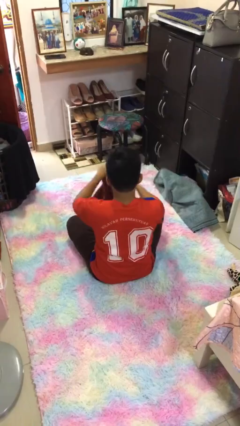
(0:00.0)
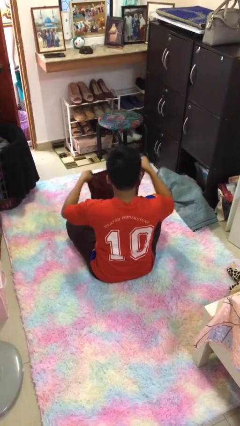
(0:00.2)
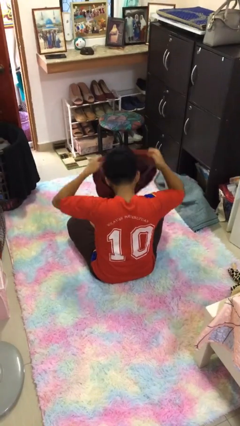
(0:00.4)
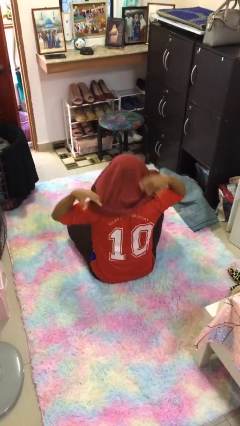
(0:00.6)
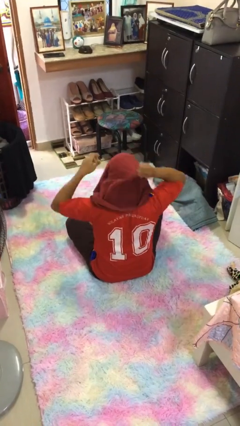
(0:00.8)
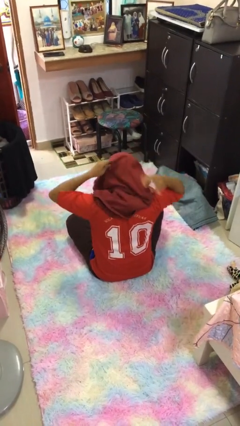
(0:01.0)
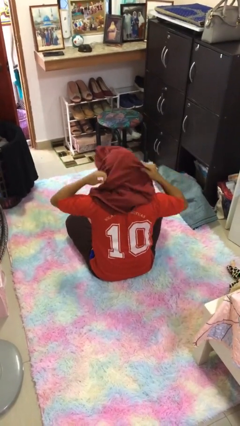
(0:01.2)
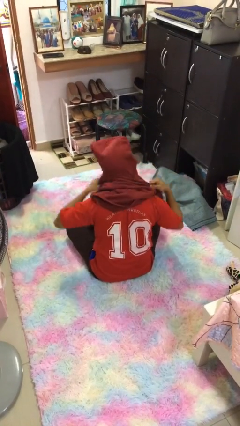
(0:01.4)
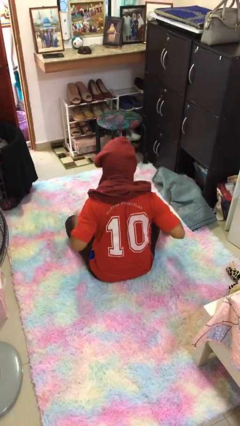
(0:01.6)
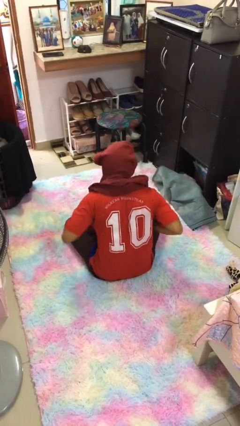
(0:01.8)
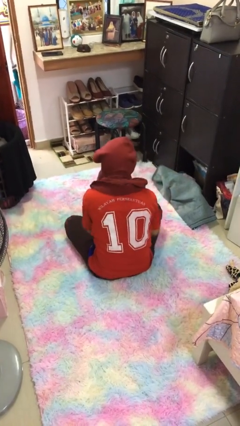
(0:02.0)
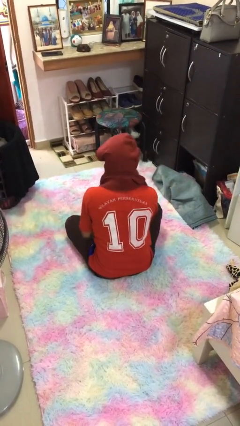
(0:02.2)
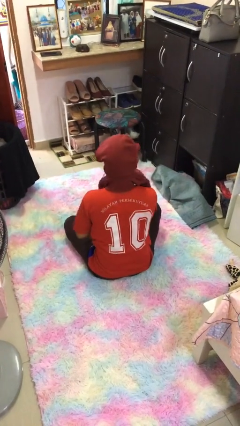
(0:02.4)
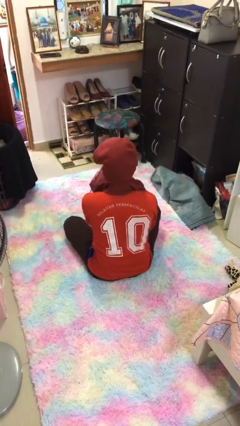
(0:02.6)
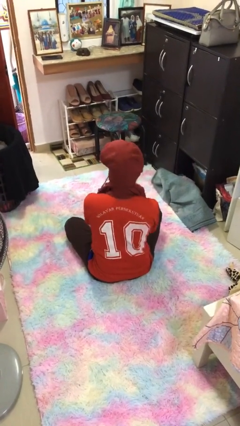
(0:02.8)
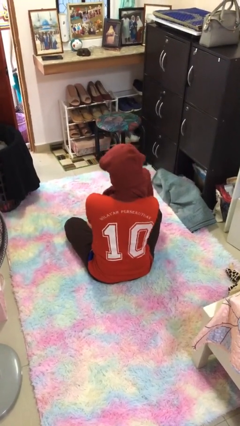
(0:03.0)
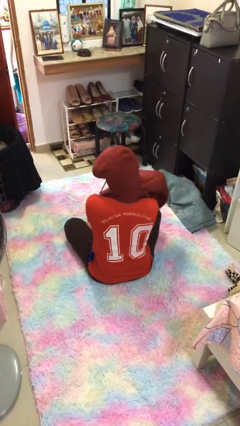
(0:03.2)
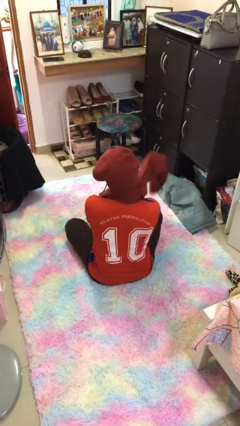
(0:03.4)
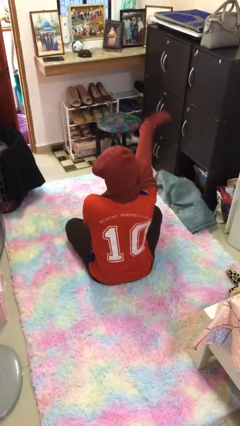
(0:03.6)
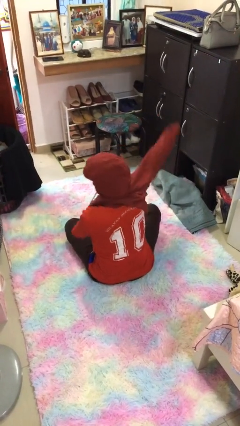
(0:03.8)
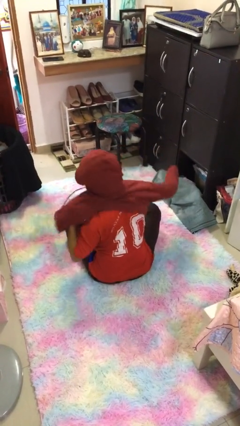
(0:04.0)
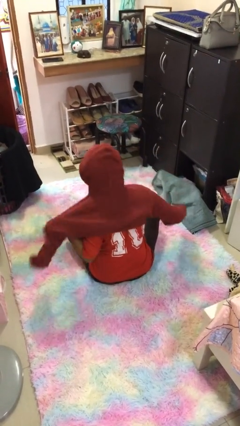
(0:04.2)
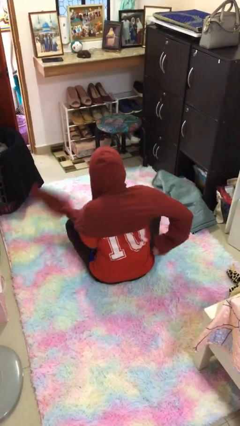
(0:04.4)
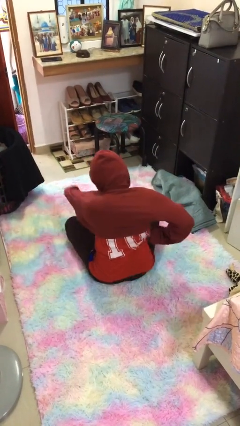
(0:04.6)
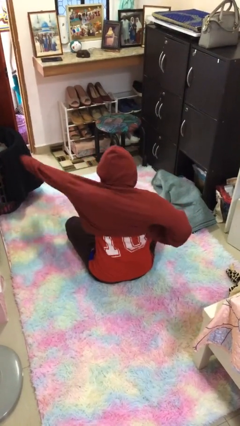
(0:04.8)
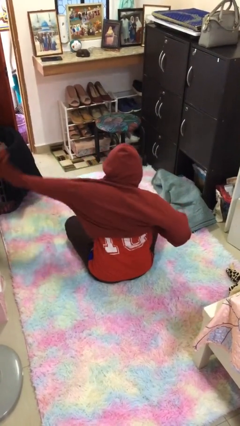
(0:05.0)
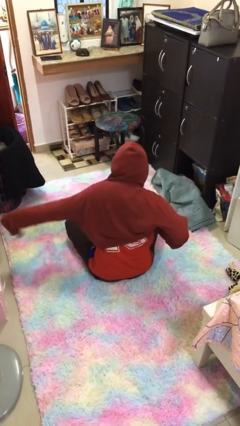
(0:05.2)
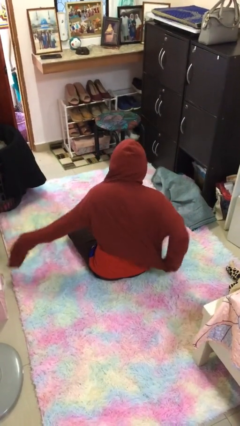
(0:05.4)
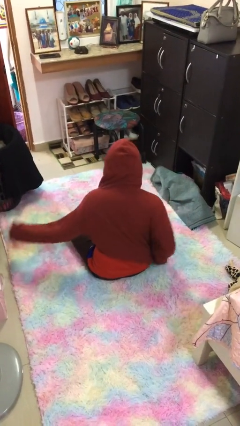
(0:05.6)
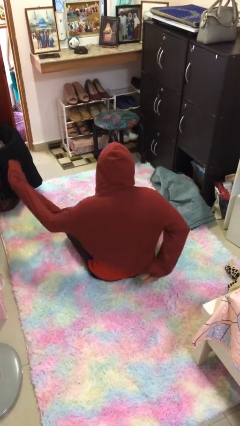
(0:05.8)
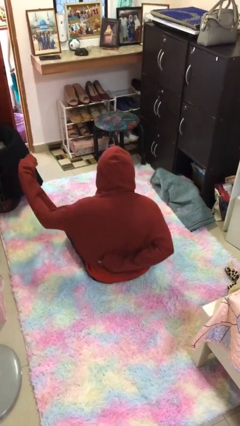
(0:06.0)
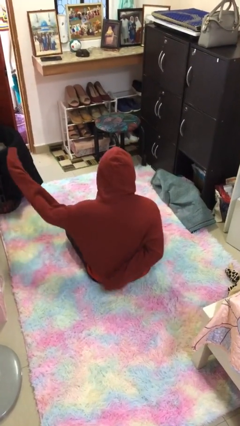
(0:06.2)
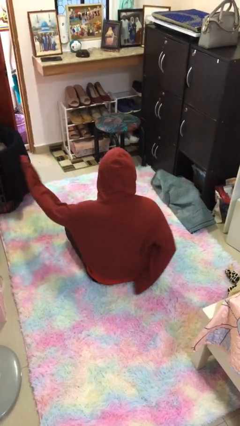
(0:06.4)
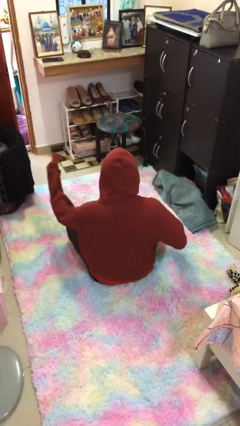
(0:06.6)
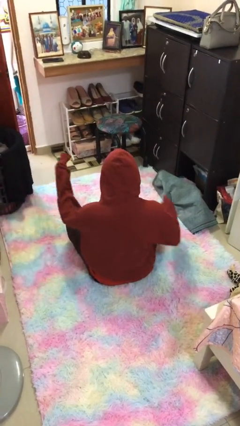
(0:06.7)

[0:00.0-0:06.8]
person puts on hoodie

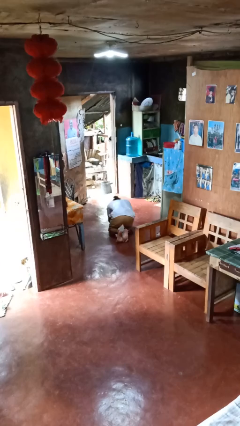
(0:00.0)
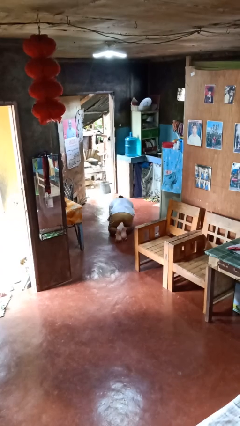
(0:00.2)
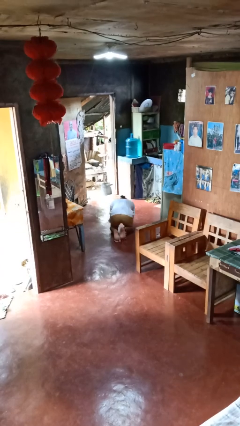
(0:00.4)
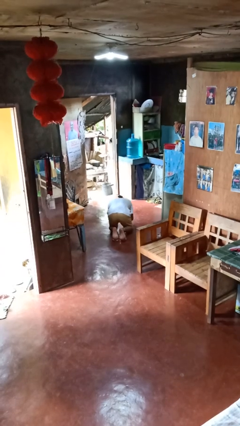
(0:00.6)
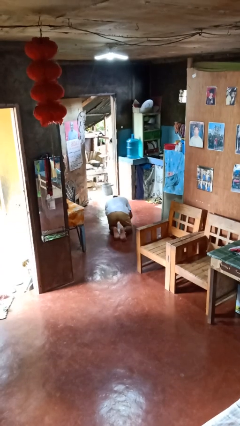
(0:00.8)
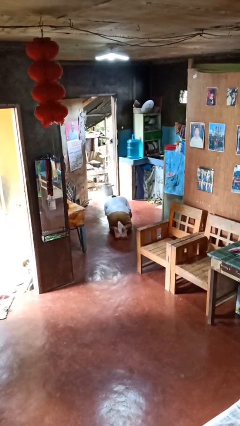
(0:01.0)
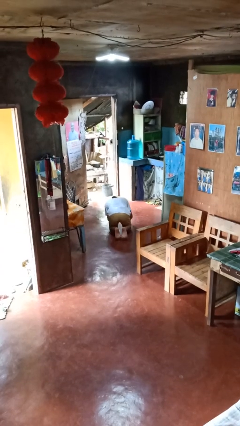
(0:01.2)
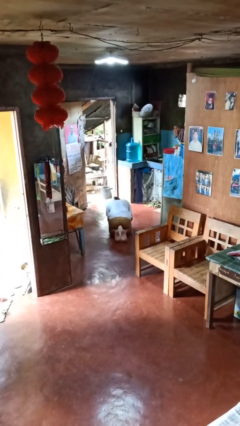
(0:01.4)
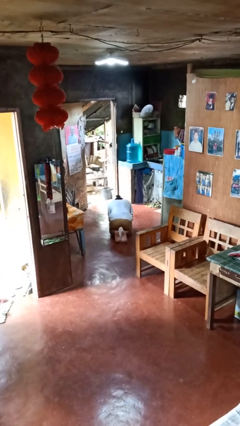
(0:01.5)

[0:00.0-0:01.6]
person crawls

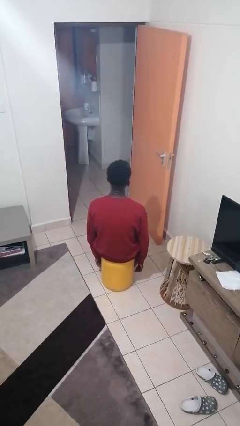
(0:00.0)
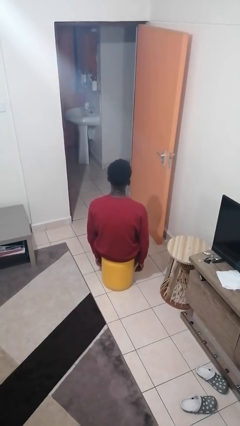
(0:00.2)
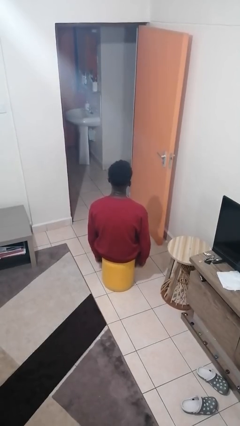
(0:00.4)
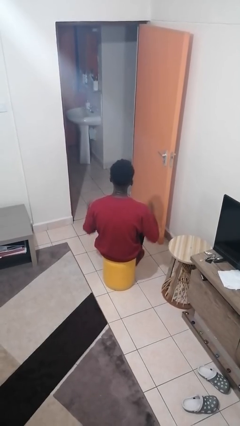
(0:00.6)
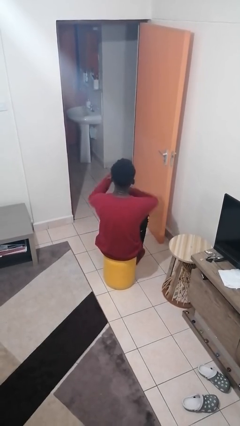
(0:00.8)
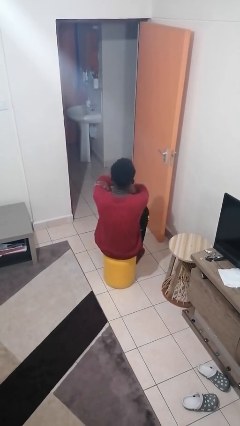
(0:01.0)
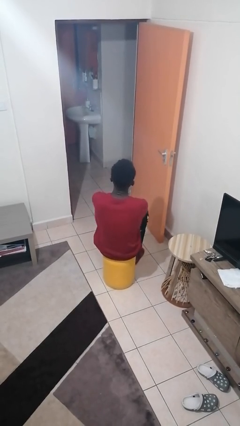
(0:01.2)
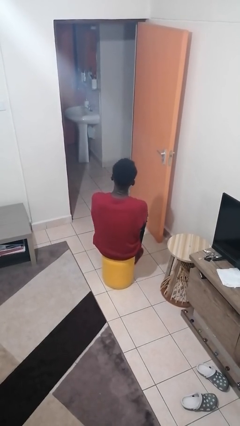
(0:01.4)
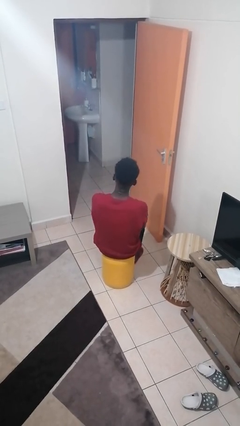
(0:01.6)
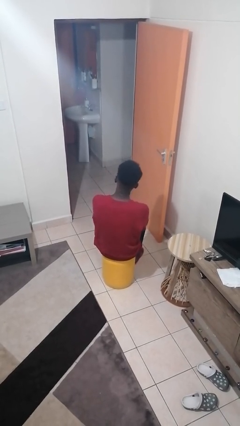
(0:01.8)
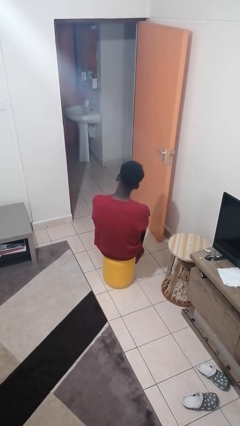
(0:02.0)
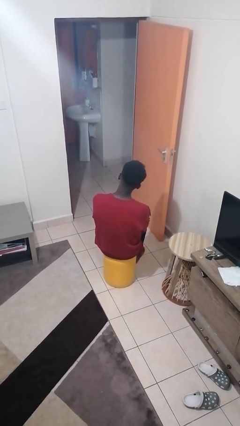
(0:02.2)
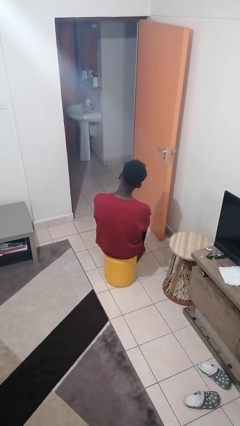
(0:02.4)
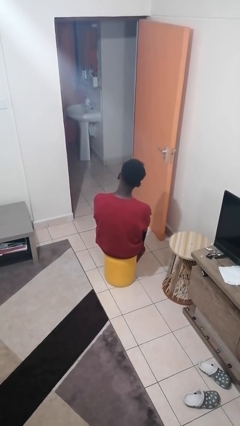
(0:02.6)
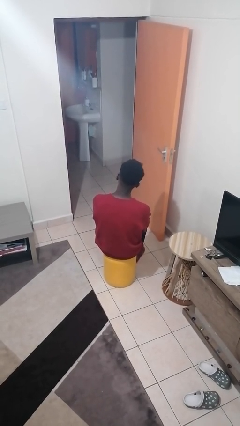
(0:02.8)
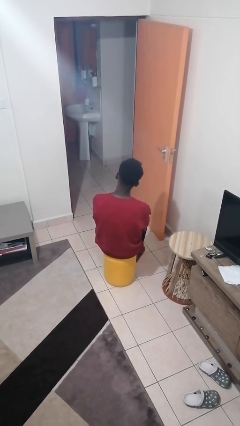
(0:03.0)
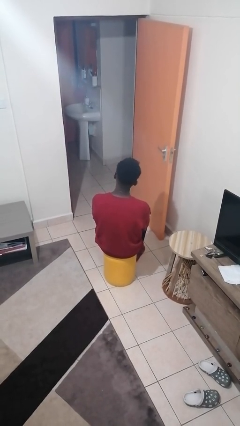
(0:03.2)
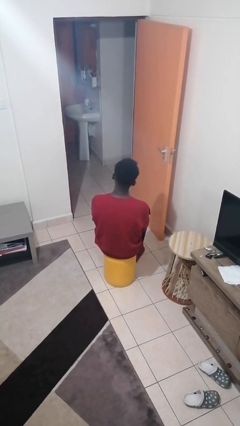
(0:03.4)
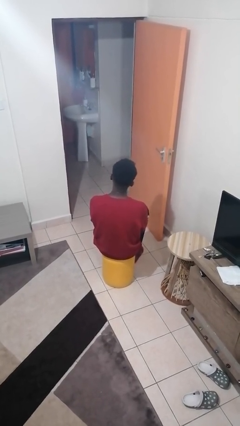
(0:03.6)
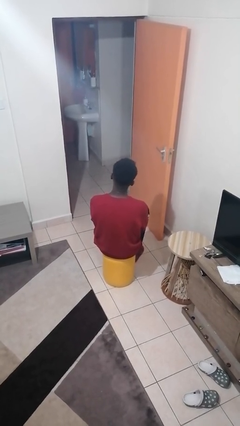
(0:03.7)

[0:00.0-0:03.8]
person crosses arms

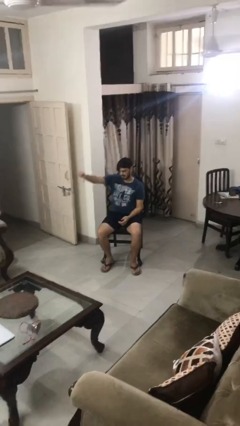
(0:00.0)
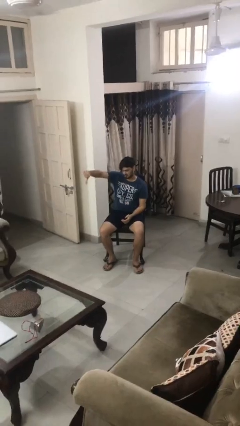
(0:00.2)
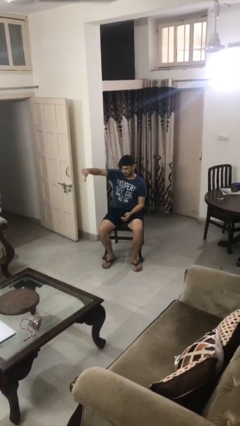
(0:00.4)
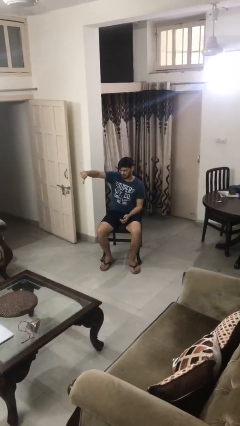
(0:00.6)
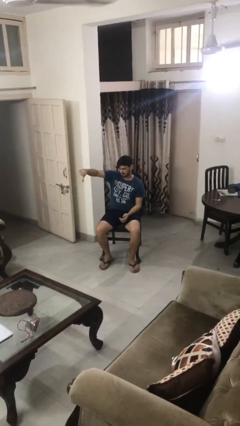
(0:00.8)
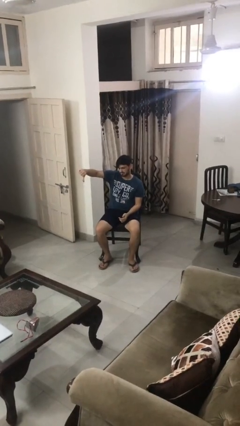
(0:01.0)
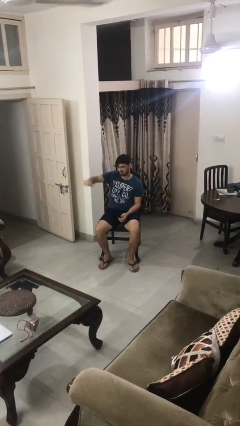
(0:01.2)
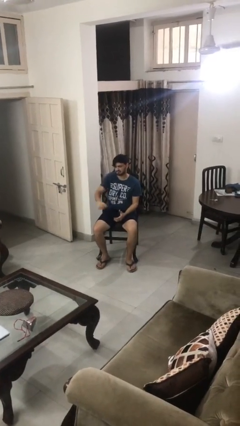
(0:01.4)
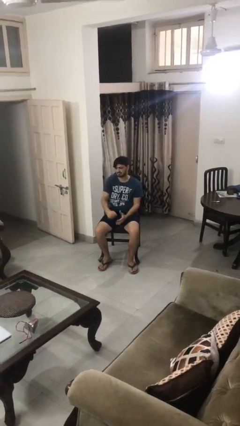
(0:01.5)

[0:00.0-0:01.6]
person gestures thumbs down

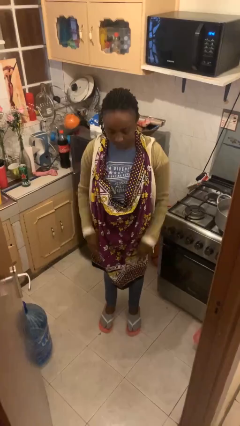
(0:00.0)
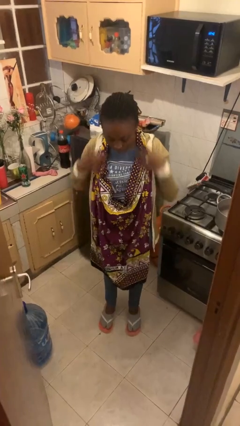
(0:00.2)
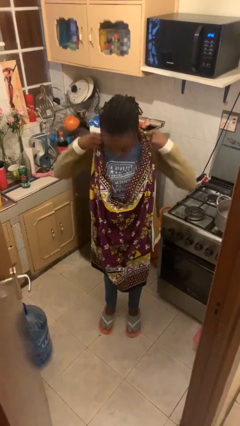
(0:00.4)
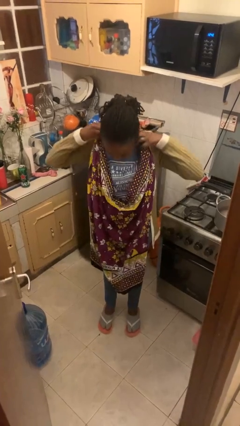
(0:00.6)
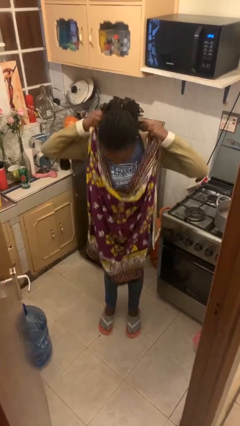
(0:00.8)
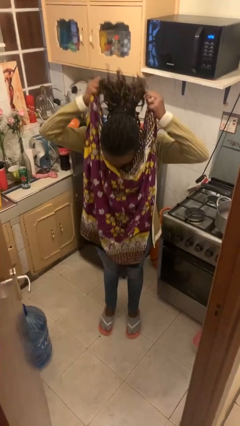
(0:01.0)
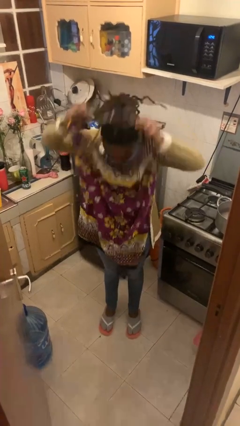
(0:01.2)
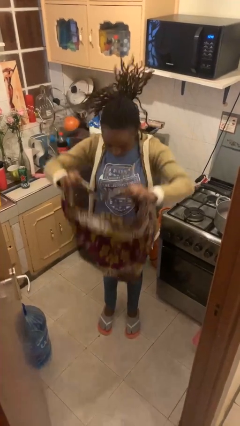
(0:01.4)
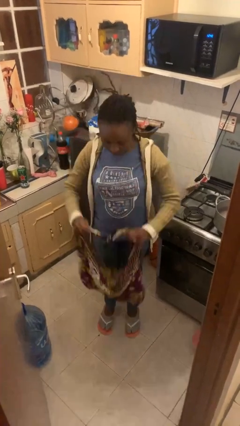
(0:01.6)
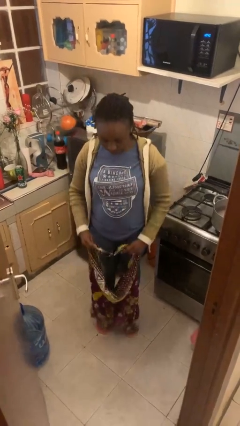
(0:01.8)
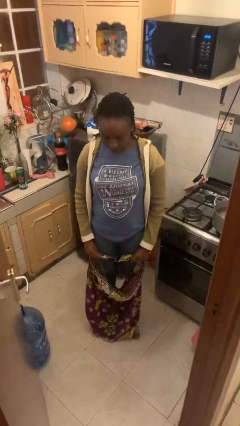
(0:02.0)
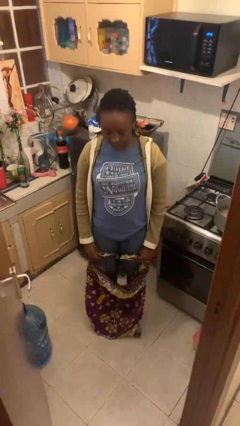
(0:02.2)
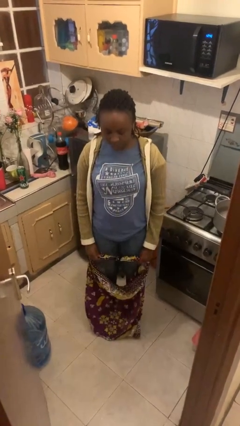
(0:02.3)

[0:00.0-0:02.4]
person takes off apron

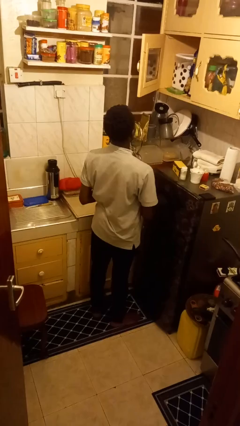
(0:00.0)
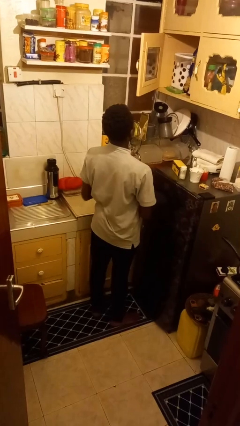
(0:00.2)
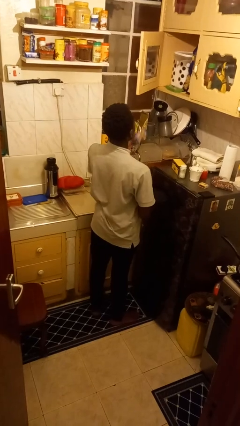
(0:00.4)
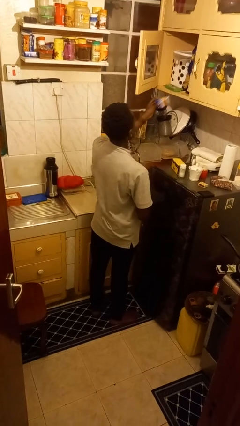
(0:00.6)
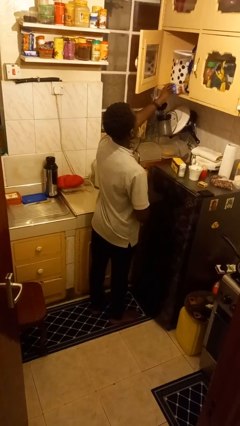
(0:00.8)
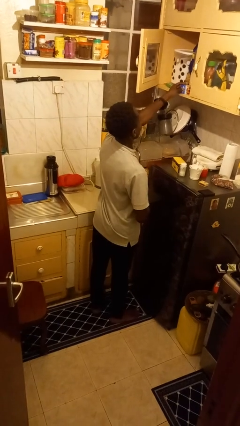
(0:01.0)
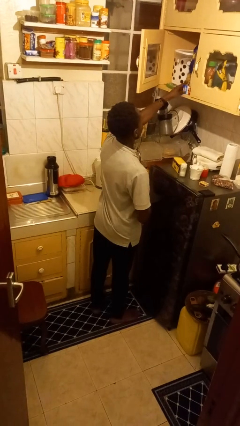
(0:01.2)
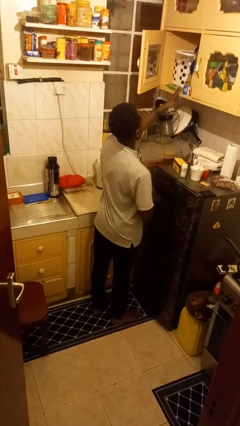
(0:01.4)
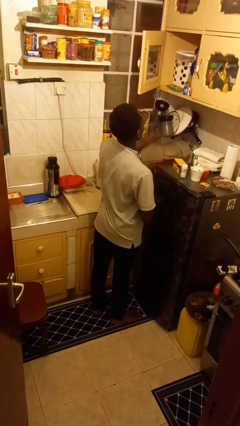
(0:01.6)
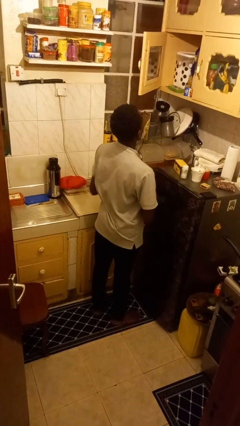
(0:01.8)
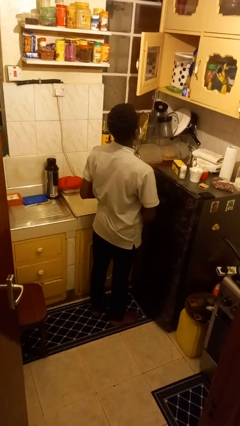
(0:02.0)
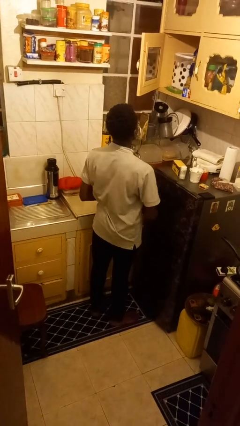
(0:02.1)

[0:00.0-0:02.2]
person puts down object into cabinet
